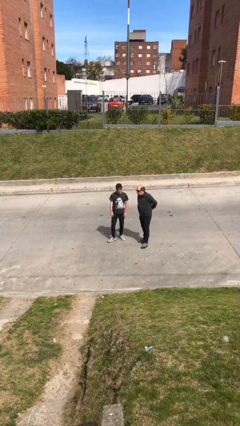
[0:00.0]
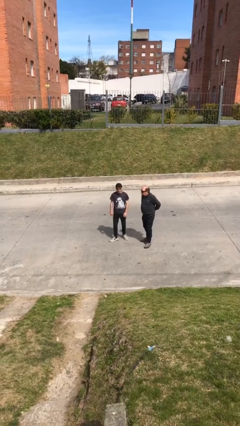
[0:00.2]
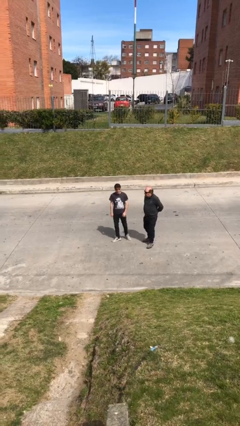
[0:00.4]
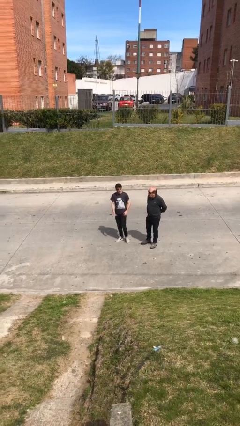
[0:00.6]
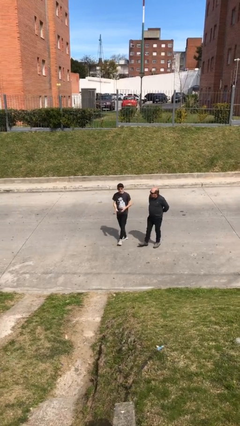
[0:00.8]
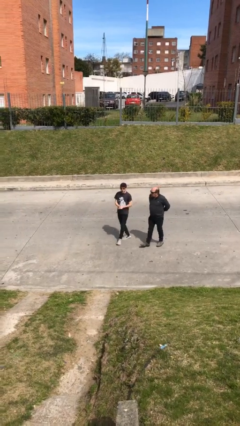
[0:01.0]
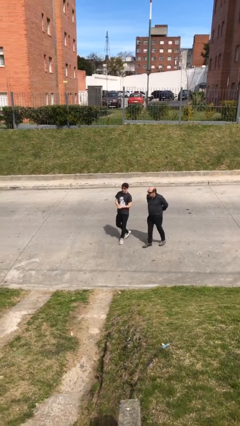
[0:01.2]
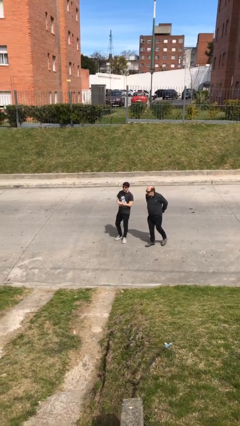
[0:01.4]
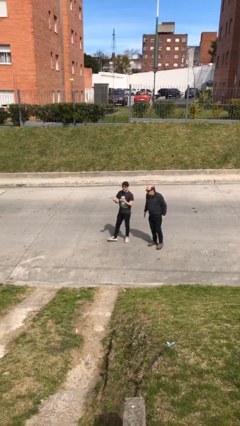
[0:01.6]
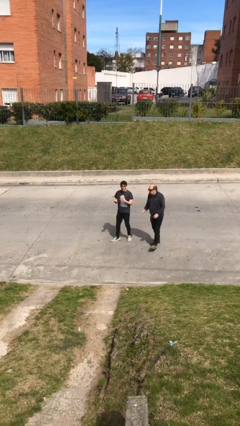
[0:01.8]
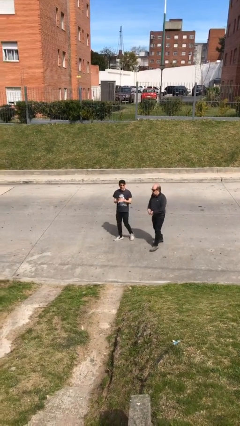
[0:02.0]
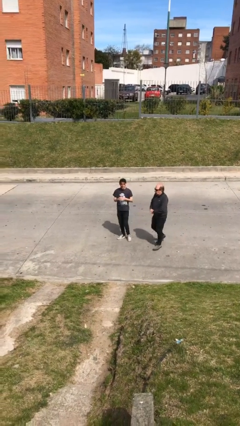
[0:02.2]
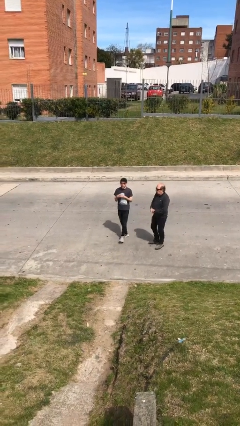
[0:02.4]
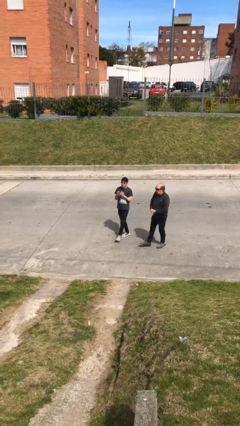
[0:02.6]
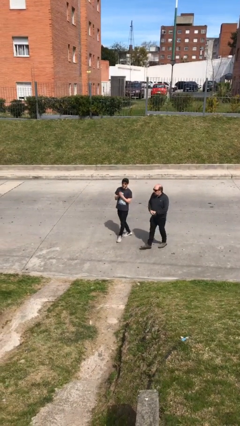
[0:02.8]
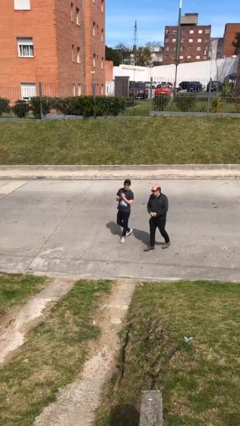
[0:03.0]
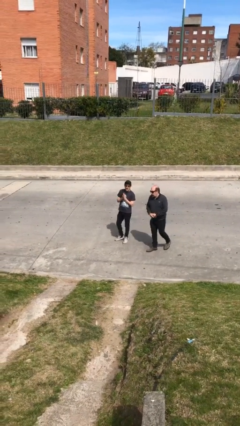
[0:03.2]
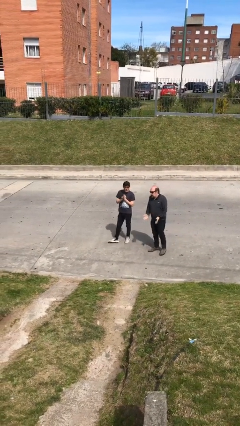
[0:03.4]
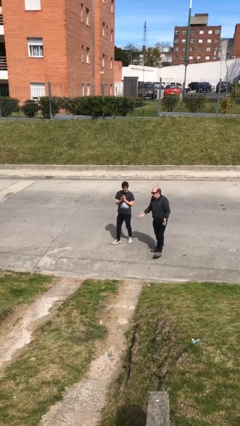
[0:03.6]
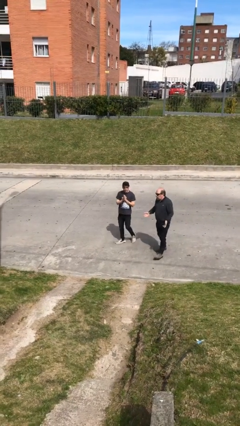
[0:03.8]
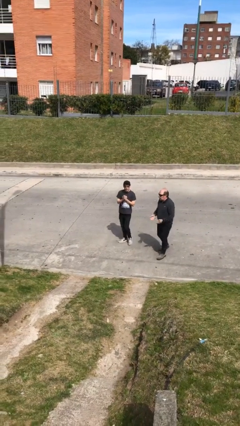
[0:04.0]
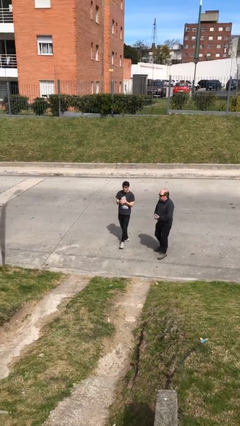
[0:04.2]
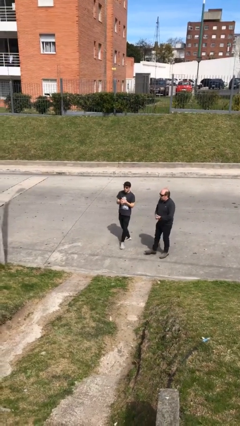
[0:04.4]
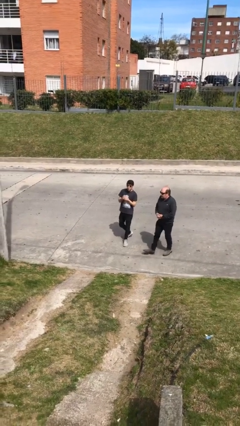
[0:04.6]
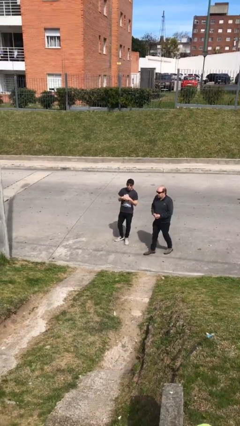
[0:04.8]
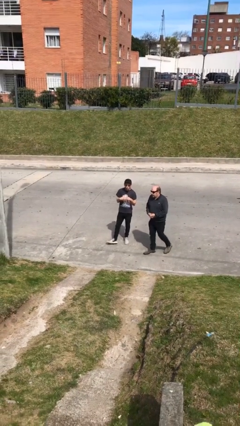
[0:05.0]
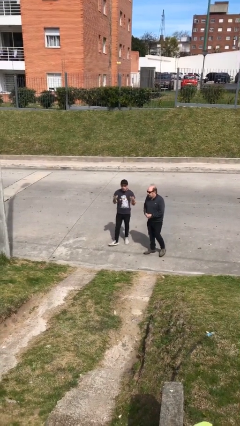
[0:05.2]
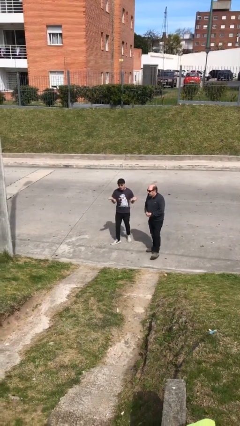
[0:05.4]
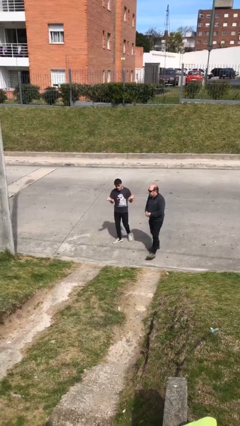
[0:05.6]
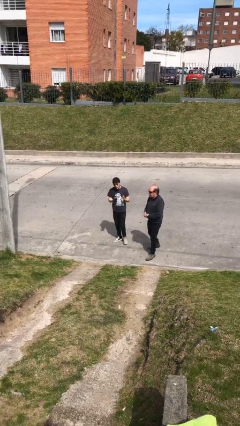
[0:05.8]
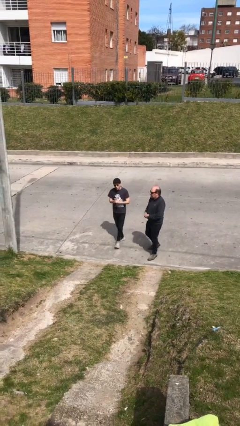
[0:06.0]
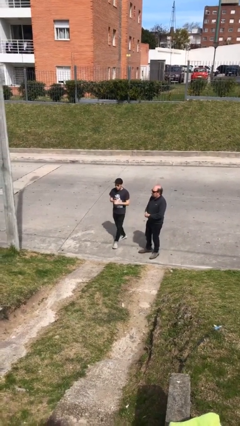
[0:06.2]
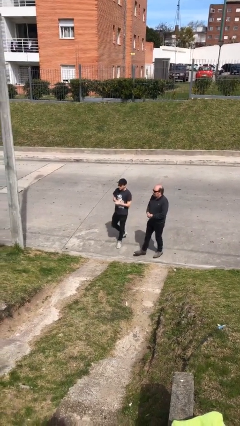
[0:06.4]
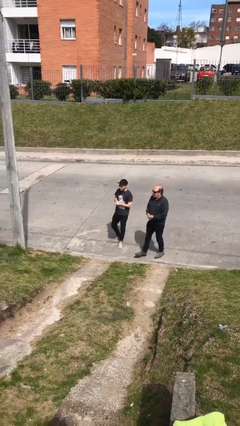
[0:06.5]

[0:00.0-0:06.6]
person talks to person

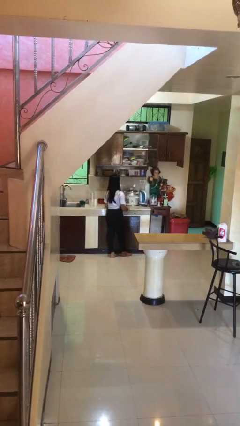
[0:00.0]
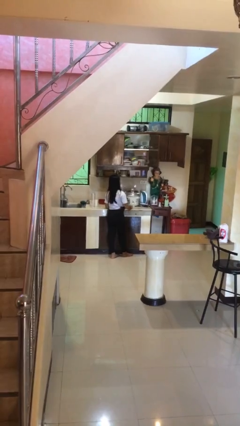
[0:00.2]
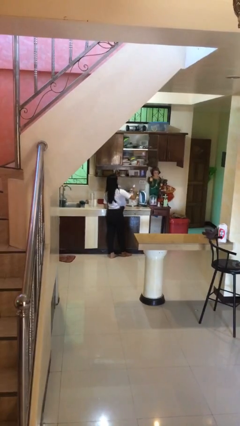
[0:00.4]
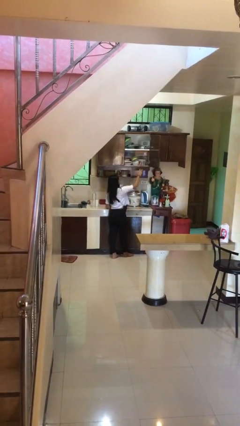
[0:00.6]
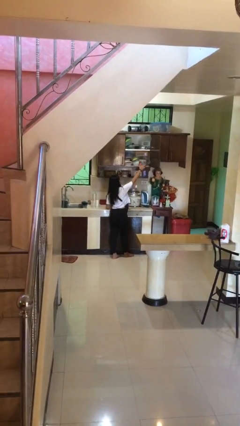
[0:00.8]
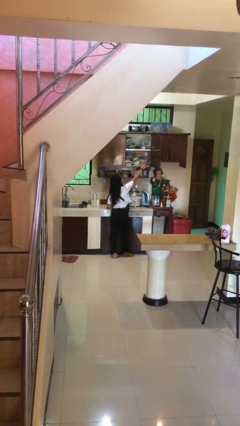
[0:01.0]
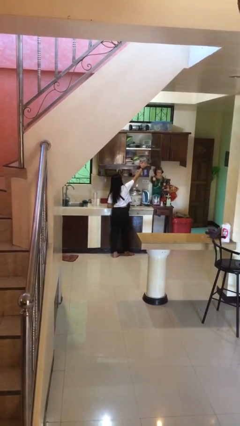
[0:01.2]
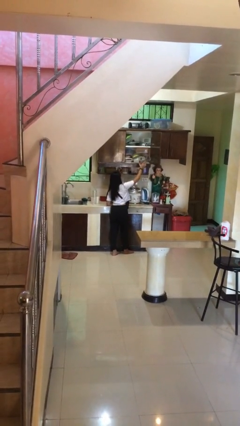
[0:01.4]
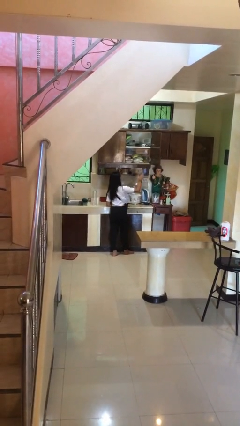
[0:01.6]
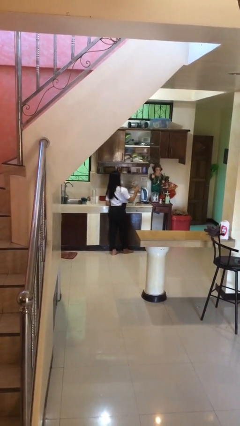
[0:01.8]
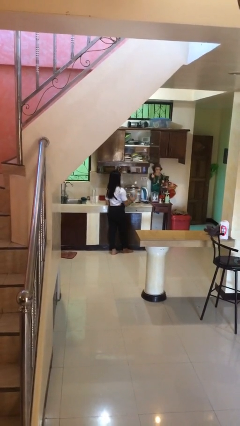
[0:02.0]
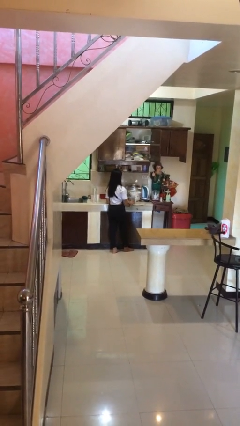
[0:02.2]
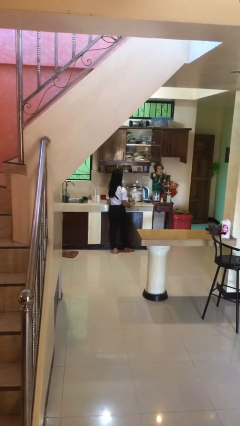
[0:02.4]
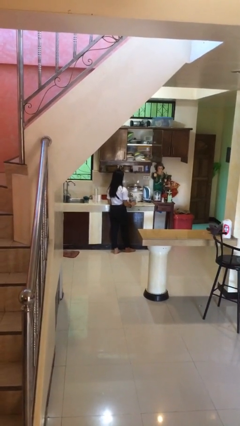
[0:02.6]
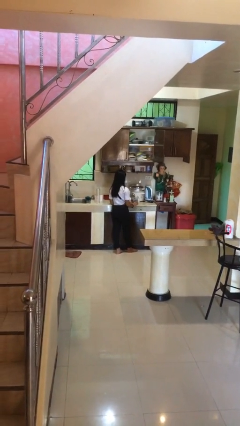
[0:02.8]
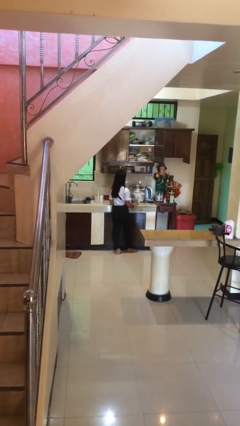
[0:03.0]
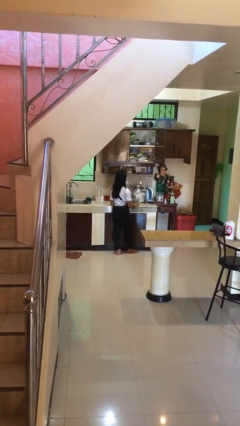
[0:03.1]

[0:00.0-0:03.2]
person picks up object from shelf

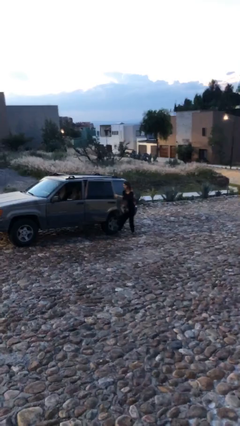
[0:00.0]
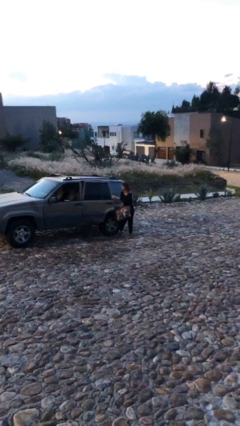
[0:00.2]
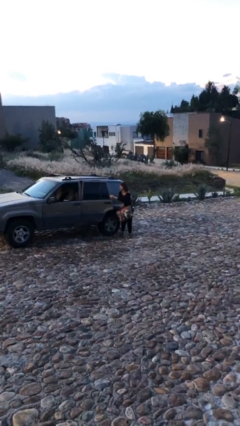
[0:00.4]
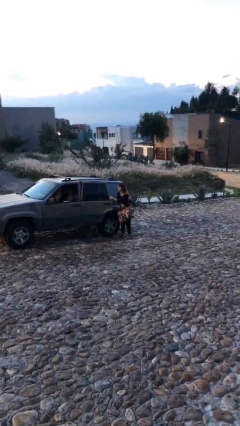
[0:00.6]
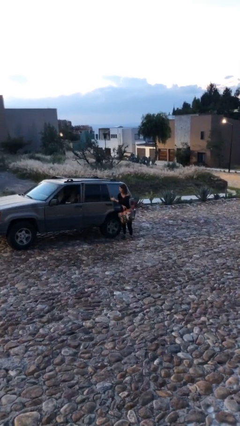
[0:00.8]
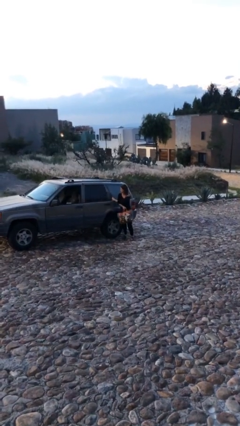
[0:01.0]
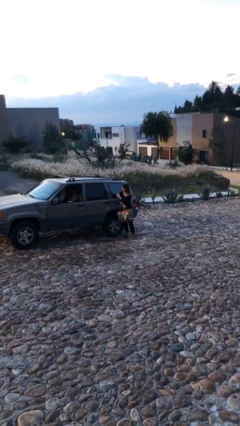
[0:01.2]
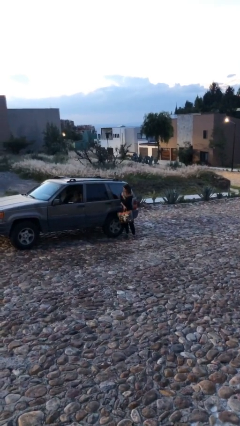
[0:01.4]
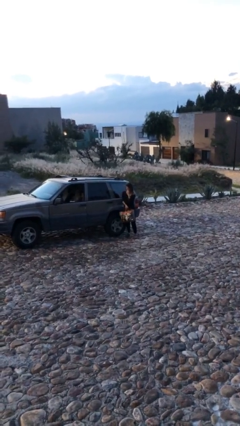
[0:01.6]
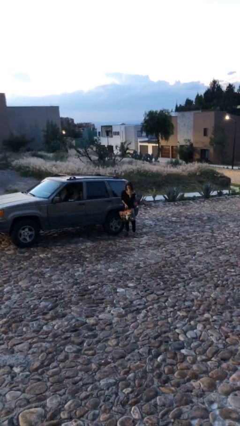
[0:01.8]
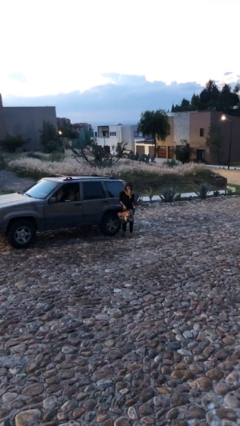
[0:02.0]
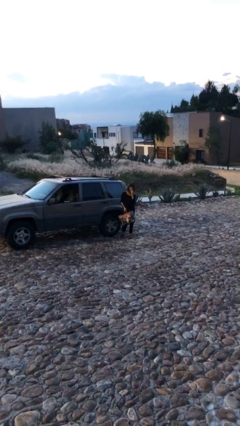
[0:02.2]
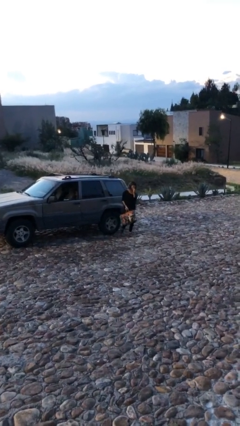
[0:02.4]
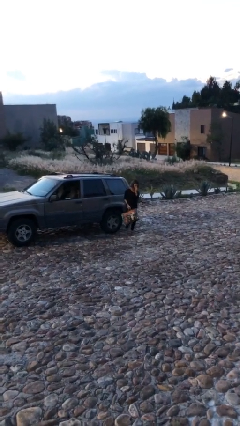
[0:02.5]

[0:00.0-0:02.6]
person closes car door

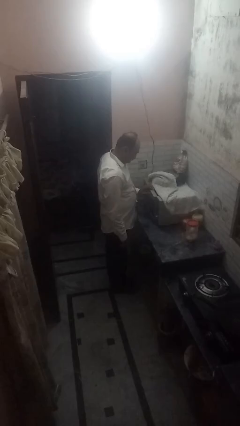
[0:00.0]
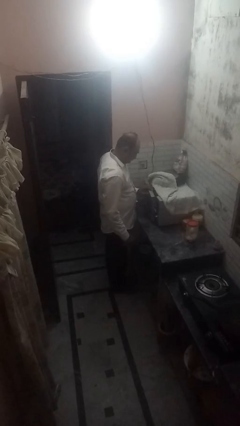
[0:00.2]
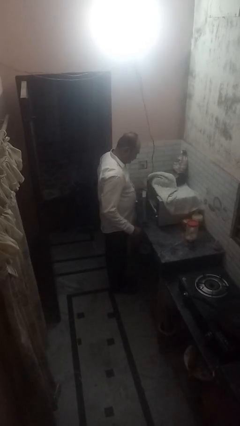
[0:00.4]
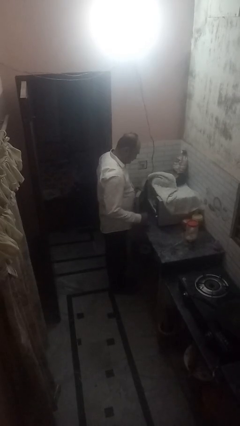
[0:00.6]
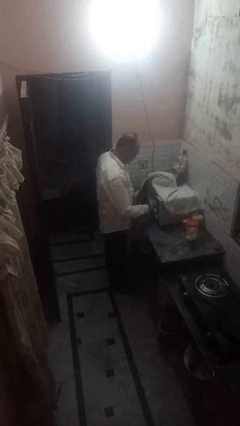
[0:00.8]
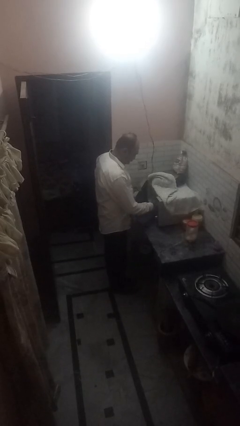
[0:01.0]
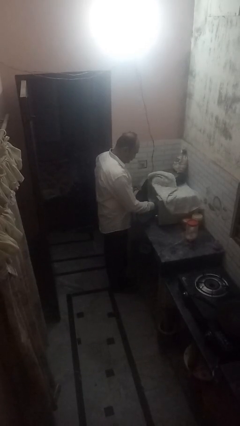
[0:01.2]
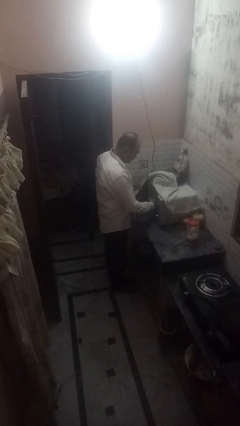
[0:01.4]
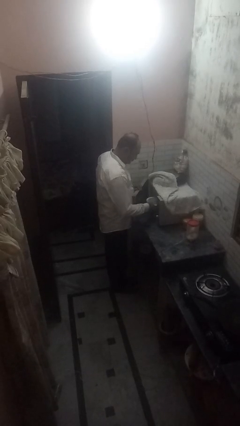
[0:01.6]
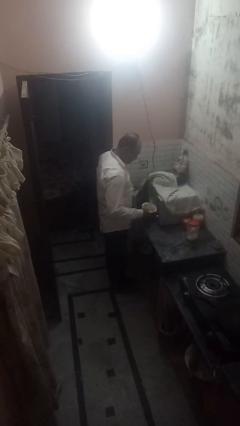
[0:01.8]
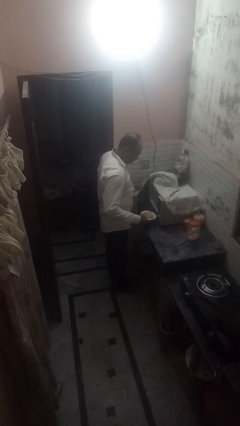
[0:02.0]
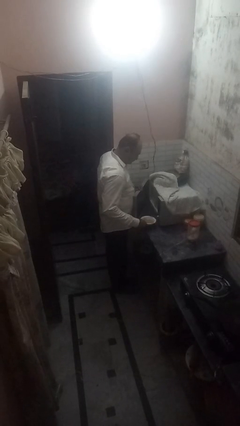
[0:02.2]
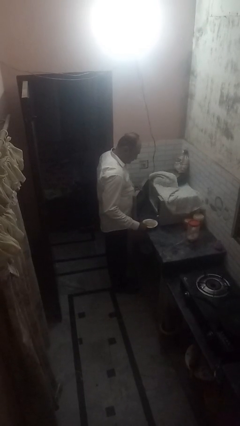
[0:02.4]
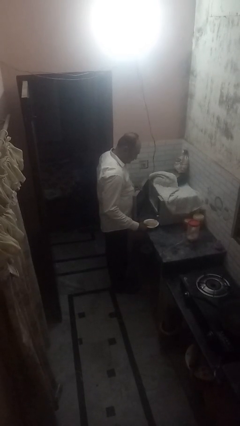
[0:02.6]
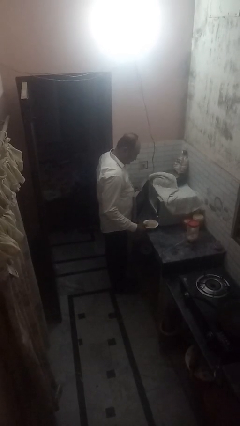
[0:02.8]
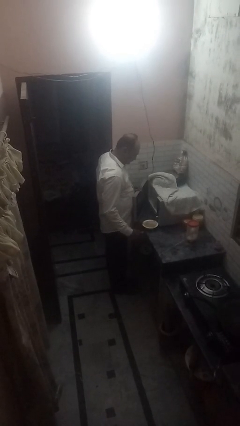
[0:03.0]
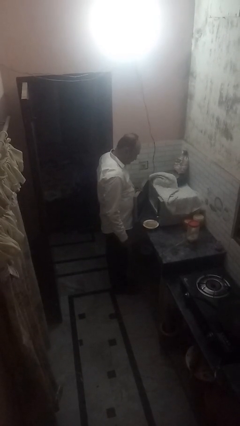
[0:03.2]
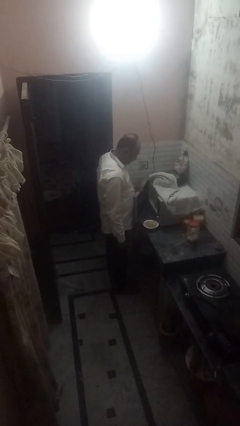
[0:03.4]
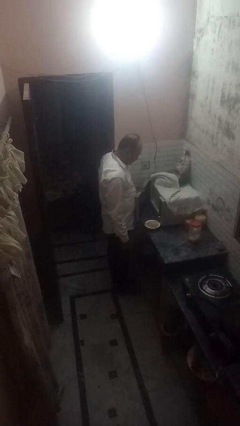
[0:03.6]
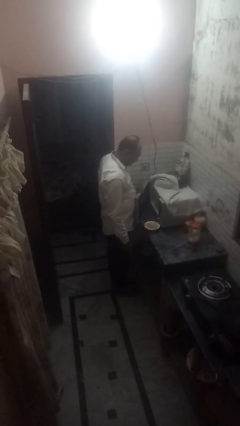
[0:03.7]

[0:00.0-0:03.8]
person takes object from microwave

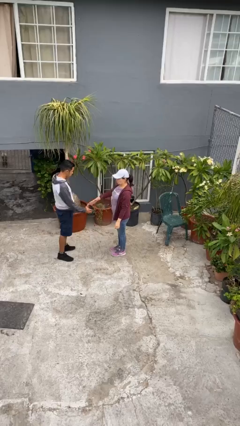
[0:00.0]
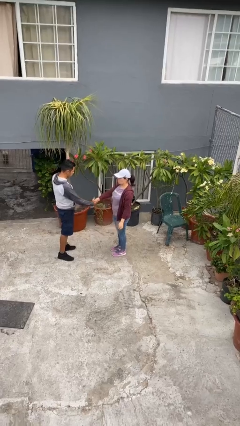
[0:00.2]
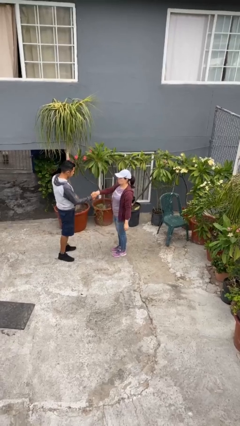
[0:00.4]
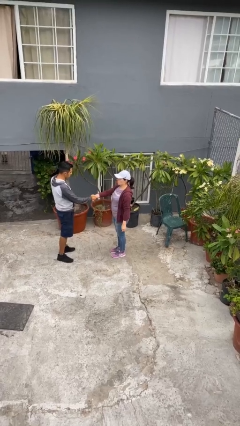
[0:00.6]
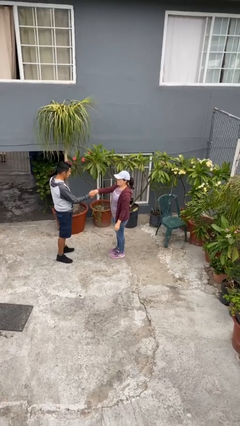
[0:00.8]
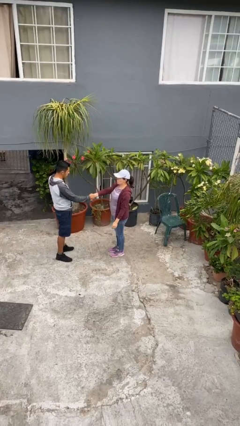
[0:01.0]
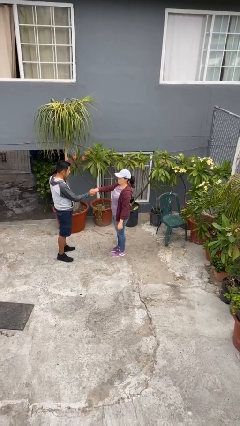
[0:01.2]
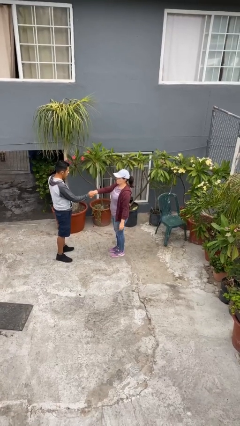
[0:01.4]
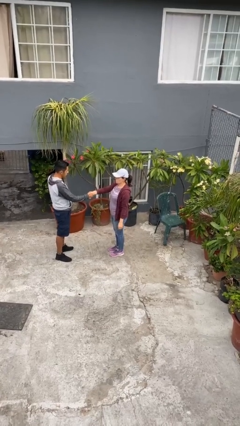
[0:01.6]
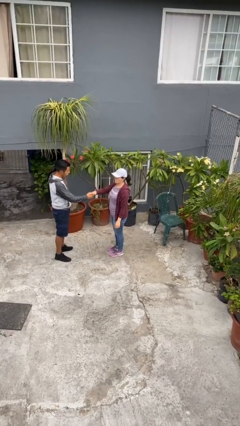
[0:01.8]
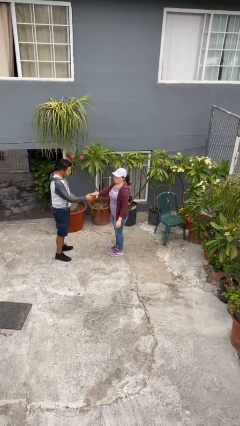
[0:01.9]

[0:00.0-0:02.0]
person shakes hand
